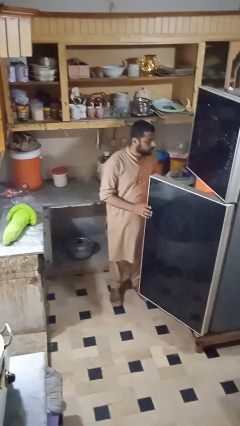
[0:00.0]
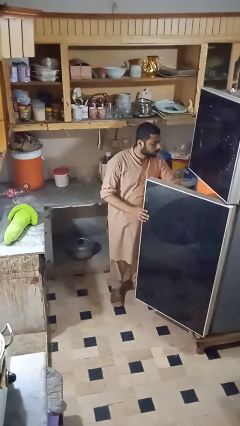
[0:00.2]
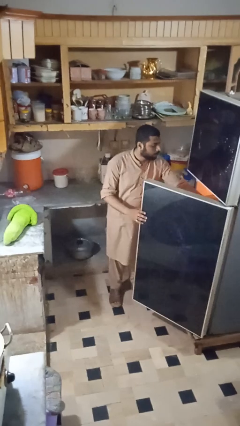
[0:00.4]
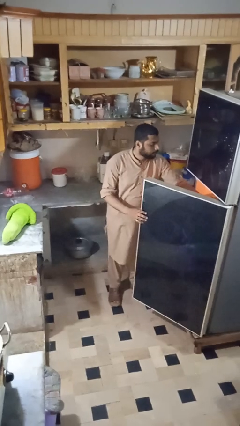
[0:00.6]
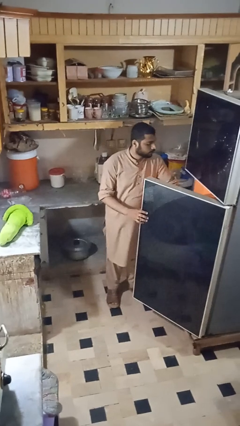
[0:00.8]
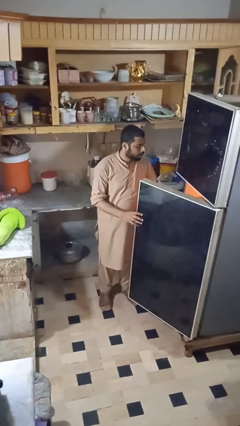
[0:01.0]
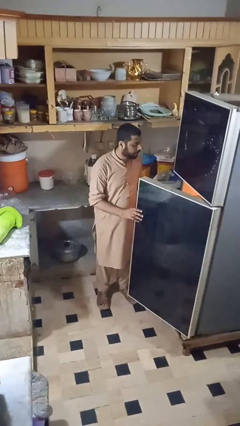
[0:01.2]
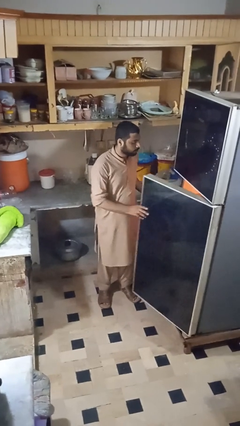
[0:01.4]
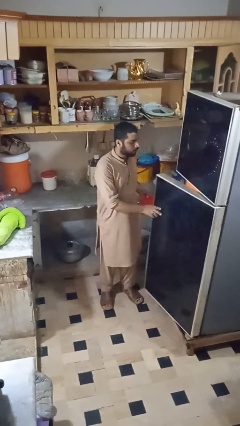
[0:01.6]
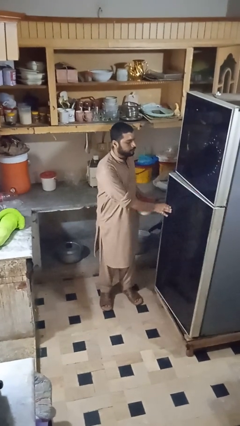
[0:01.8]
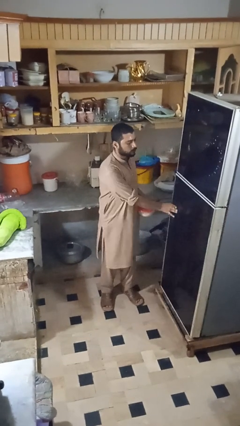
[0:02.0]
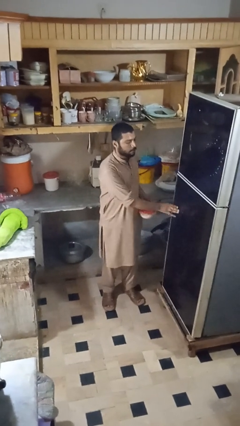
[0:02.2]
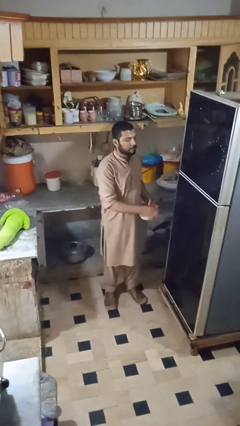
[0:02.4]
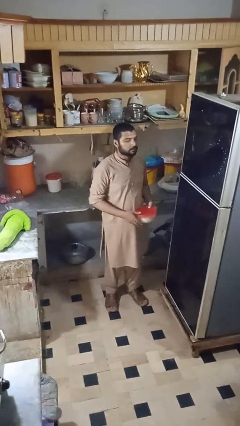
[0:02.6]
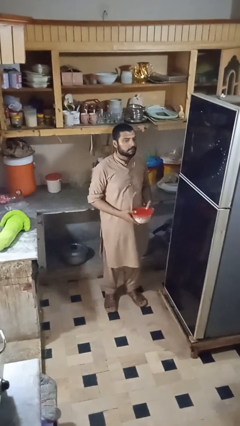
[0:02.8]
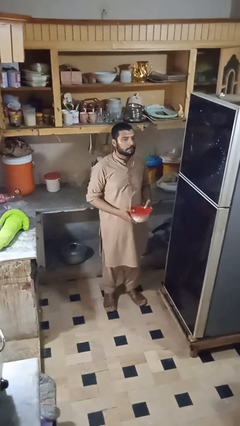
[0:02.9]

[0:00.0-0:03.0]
person takes object from refrigerator

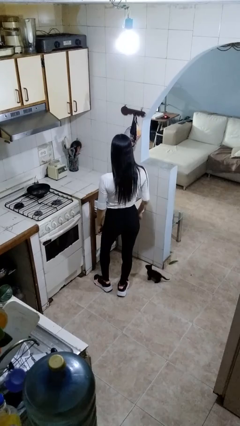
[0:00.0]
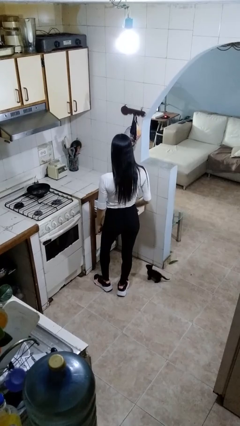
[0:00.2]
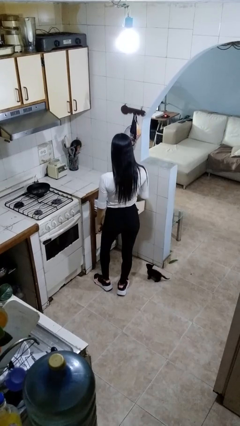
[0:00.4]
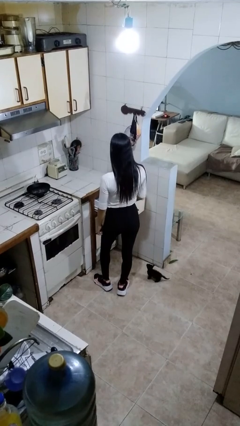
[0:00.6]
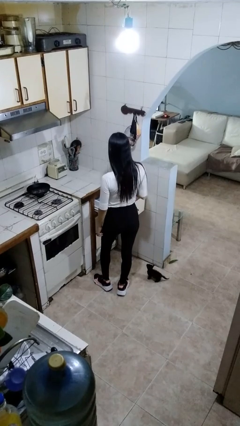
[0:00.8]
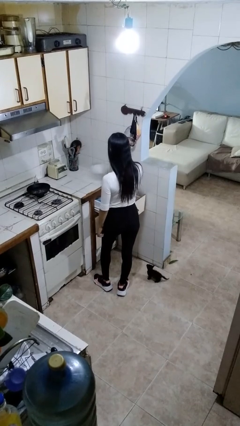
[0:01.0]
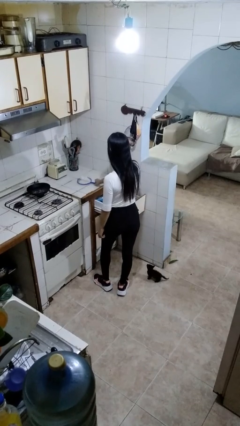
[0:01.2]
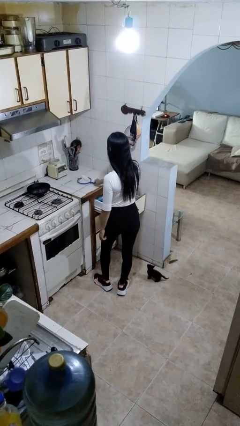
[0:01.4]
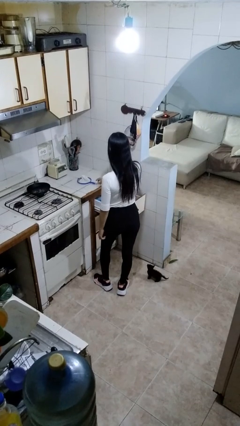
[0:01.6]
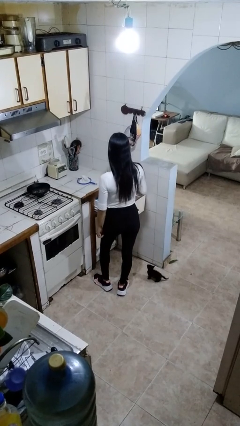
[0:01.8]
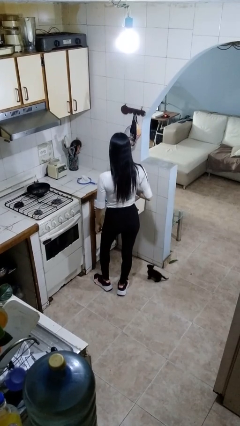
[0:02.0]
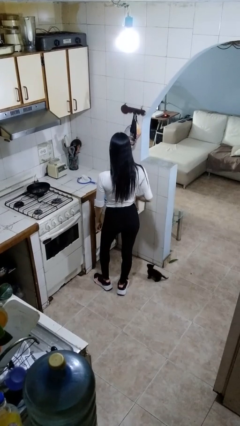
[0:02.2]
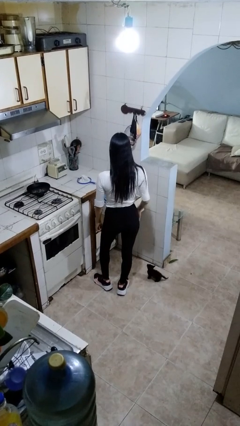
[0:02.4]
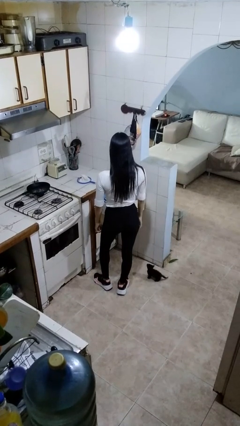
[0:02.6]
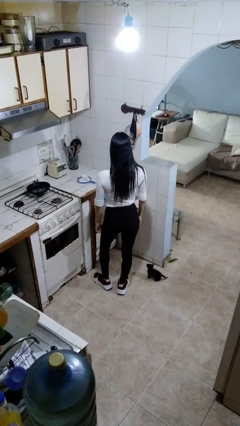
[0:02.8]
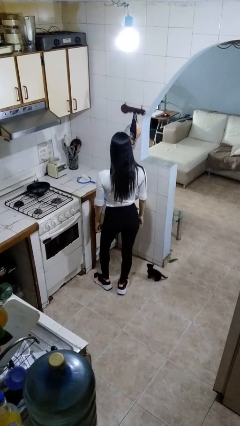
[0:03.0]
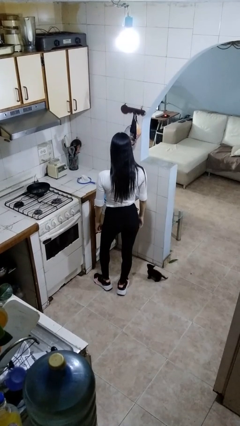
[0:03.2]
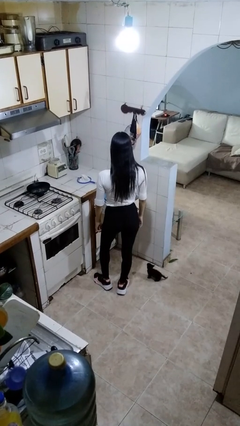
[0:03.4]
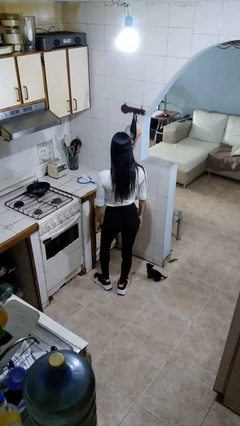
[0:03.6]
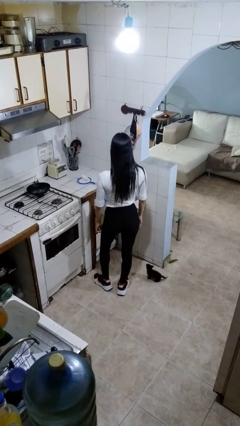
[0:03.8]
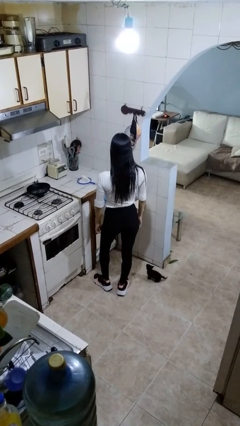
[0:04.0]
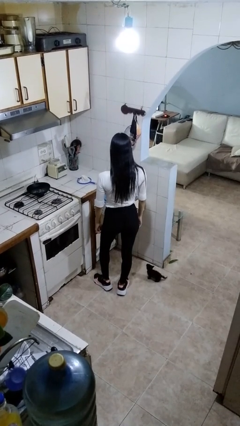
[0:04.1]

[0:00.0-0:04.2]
person takes object from kitchen drawer

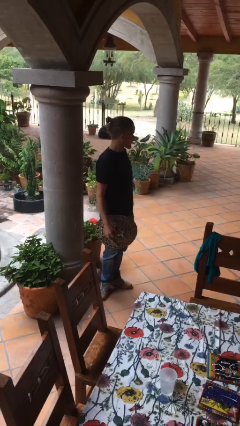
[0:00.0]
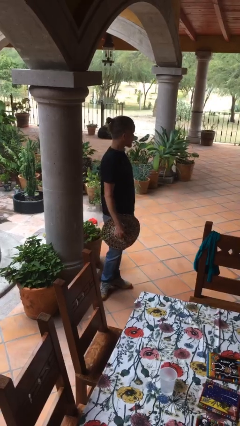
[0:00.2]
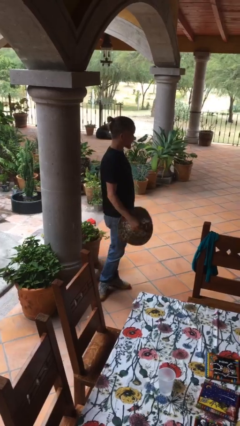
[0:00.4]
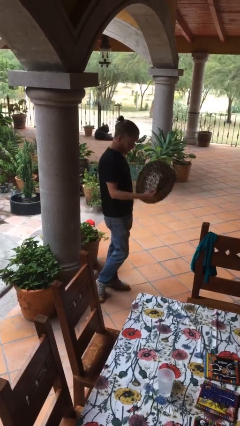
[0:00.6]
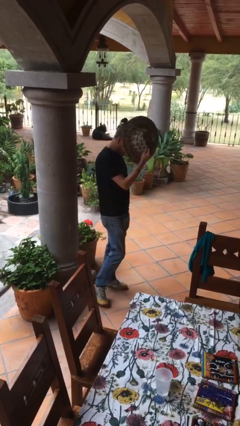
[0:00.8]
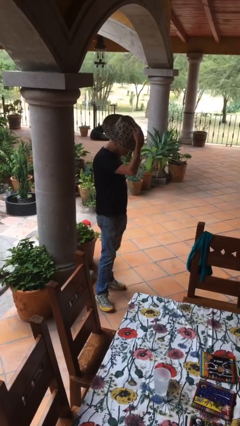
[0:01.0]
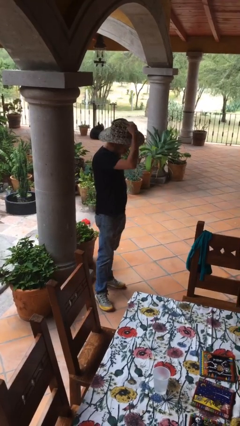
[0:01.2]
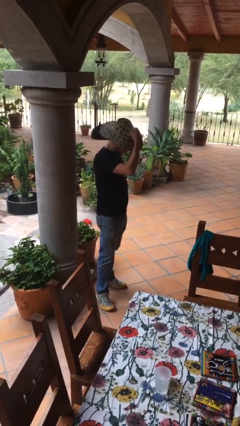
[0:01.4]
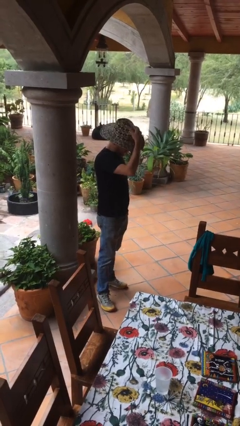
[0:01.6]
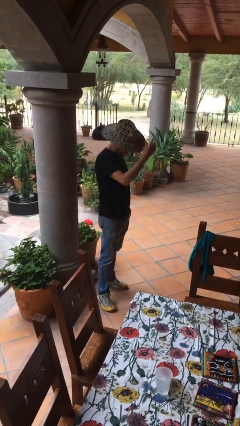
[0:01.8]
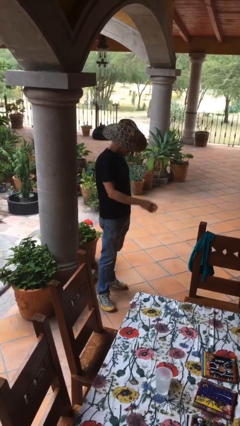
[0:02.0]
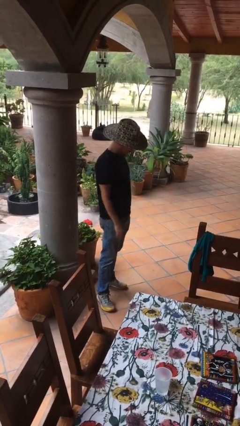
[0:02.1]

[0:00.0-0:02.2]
person puts on hat

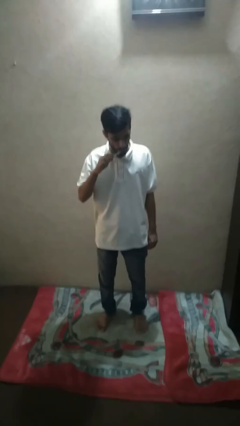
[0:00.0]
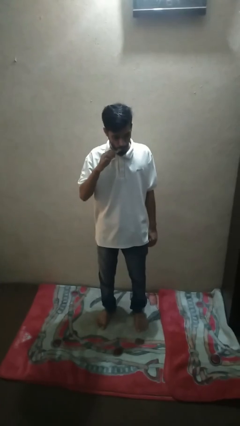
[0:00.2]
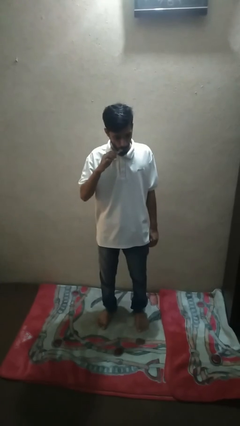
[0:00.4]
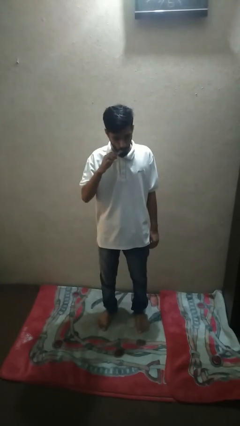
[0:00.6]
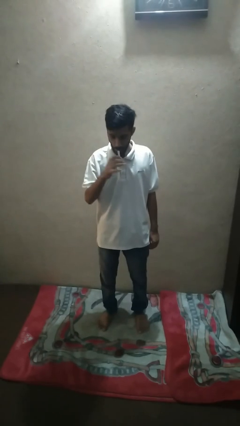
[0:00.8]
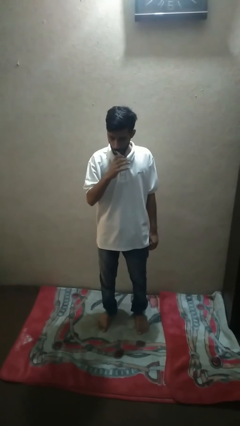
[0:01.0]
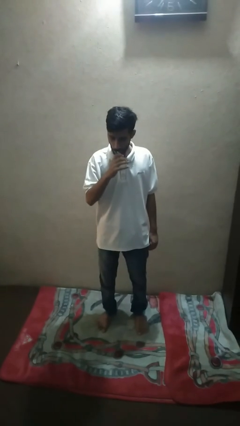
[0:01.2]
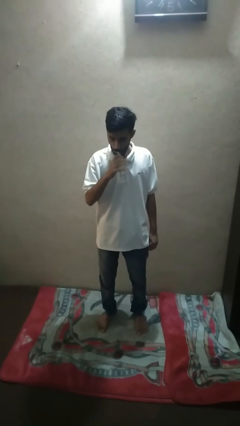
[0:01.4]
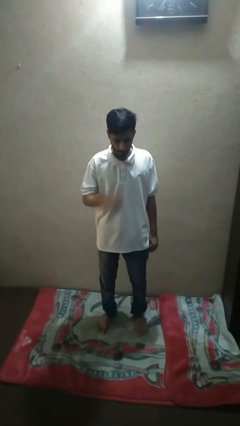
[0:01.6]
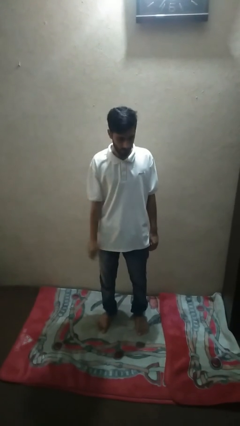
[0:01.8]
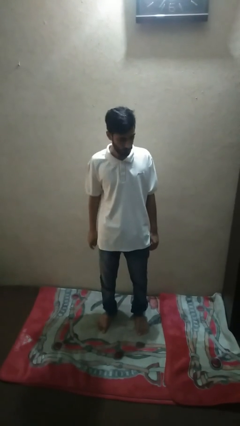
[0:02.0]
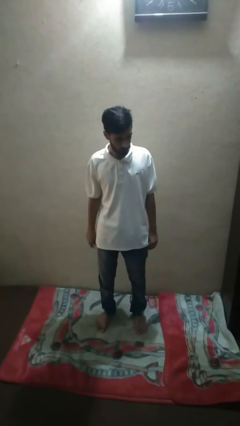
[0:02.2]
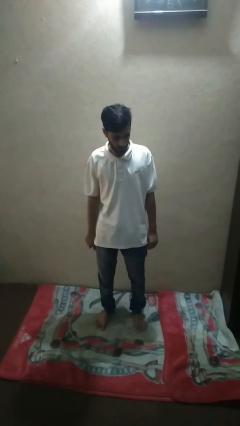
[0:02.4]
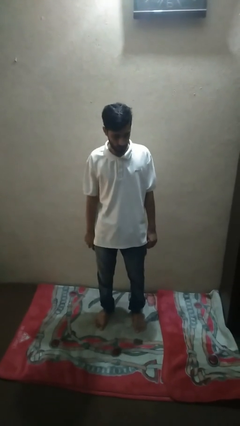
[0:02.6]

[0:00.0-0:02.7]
person brushes teeth

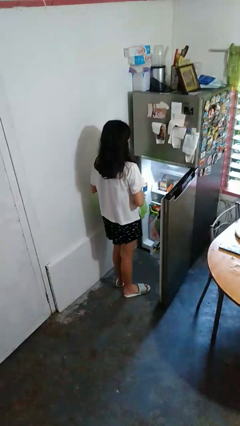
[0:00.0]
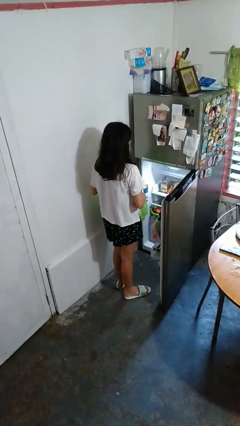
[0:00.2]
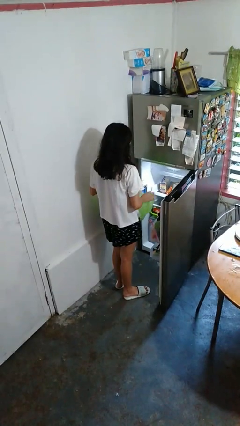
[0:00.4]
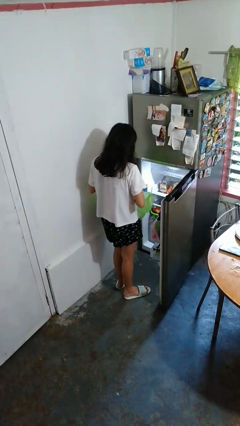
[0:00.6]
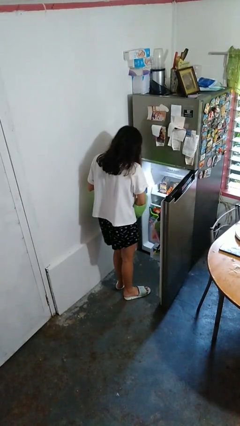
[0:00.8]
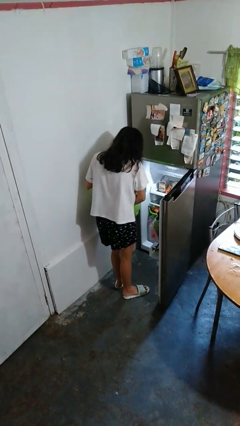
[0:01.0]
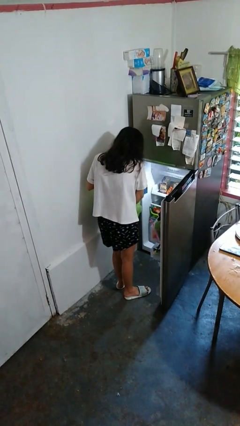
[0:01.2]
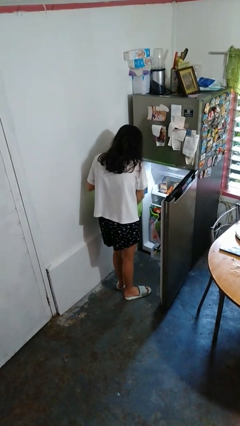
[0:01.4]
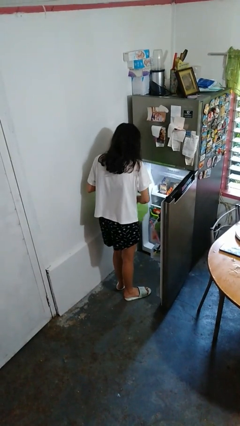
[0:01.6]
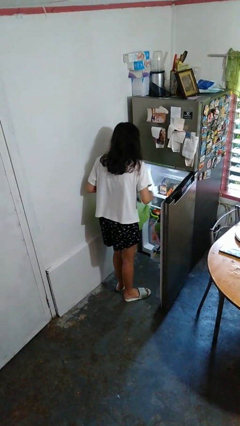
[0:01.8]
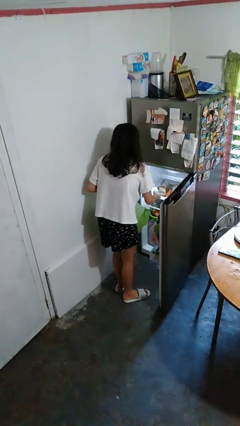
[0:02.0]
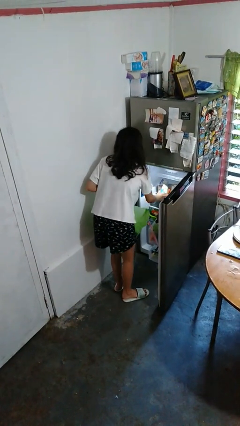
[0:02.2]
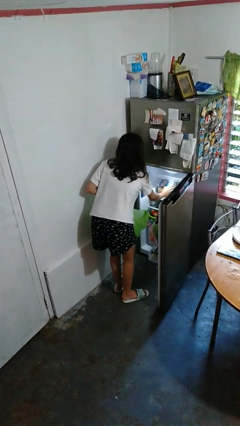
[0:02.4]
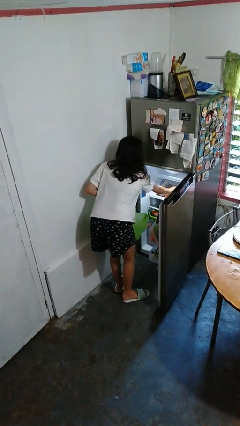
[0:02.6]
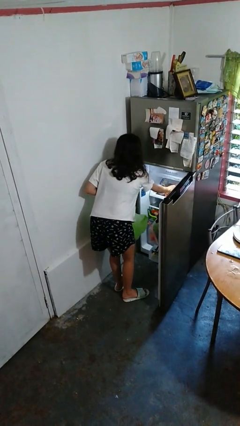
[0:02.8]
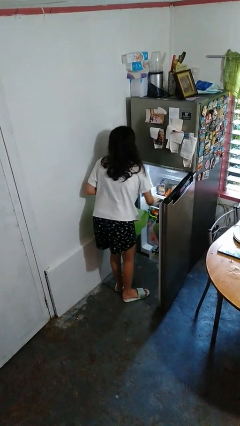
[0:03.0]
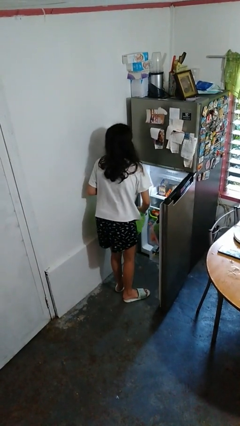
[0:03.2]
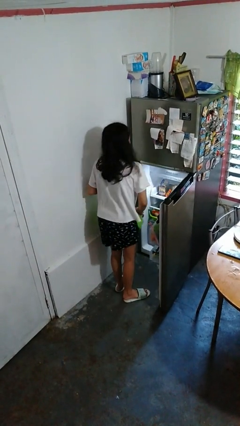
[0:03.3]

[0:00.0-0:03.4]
person loads groceries into refrigerator

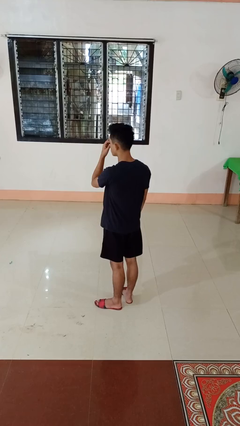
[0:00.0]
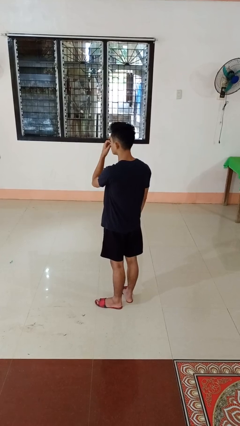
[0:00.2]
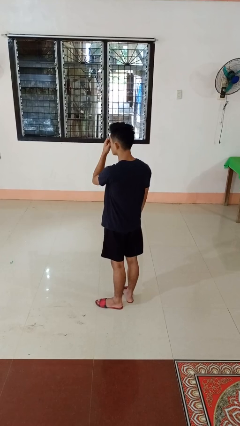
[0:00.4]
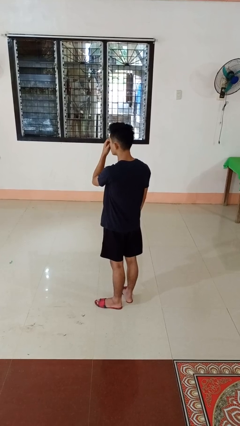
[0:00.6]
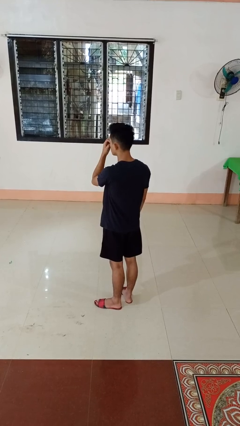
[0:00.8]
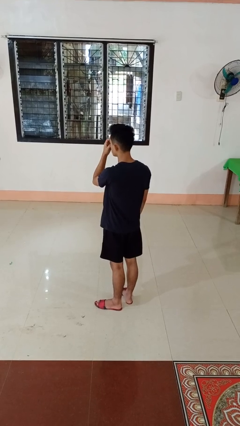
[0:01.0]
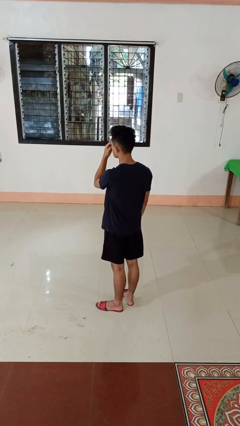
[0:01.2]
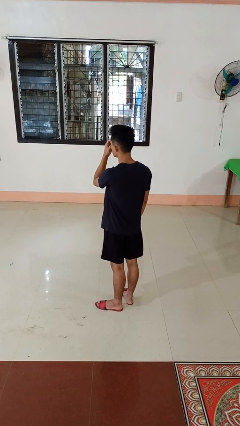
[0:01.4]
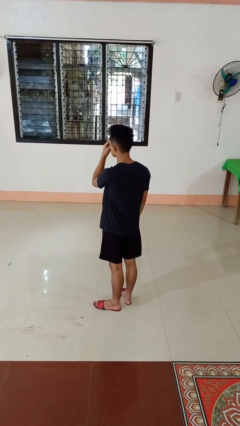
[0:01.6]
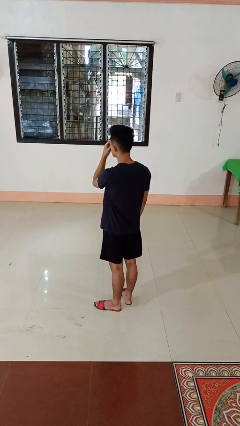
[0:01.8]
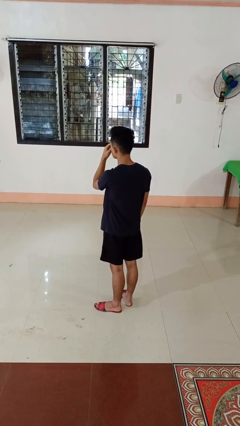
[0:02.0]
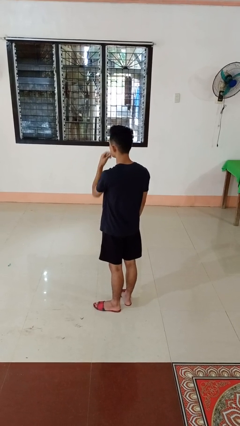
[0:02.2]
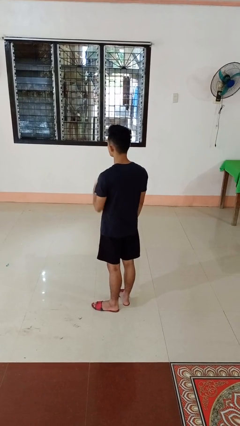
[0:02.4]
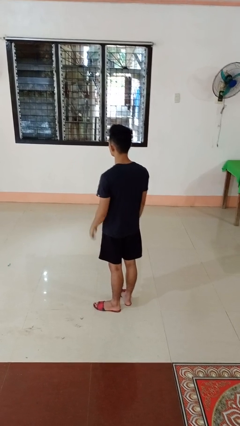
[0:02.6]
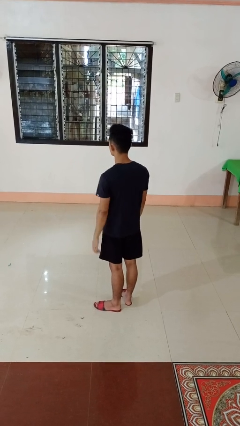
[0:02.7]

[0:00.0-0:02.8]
person scratches face
